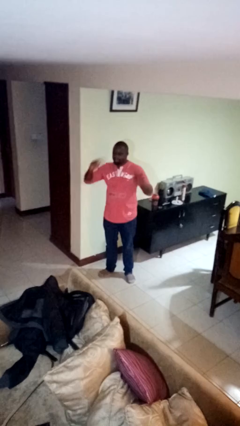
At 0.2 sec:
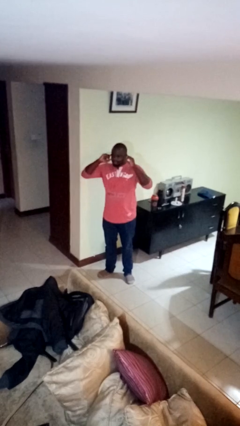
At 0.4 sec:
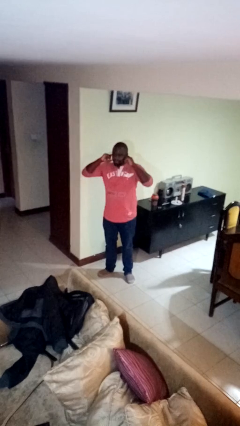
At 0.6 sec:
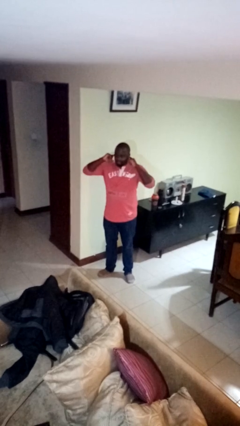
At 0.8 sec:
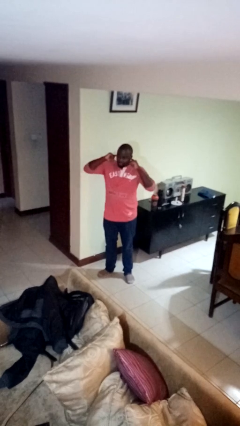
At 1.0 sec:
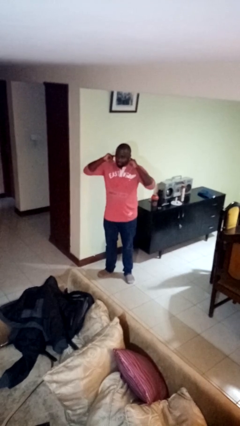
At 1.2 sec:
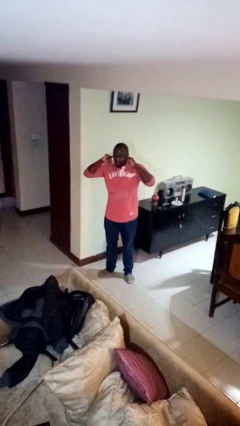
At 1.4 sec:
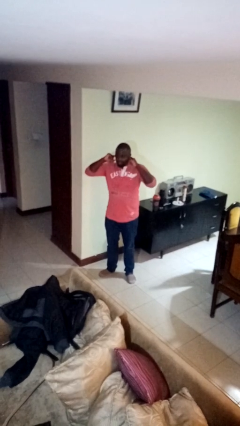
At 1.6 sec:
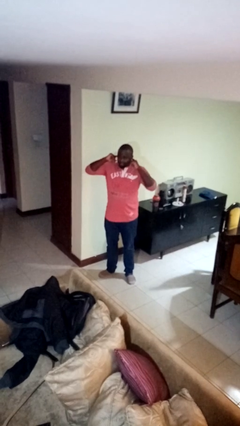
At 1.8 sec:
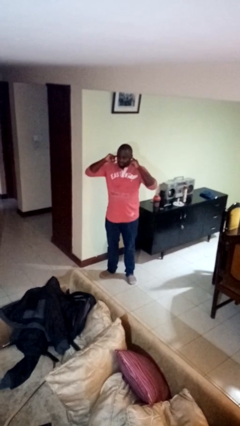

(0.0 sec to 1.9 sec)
person puts fingers in ear

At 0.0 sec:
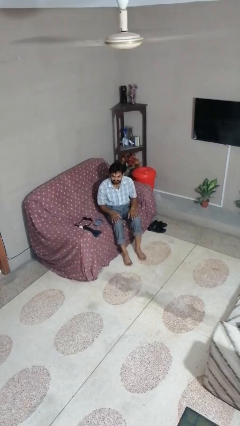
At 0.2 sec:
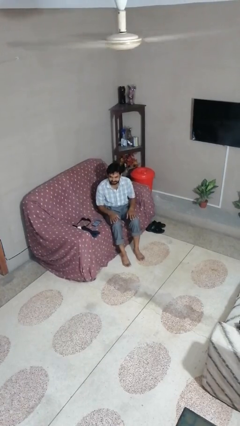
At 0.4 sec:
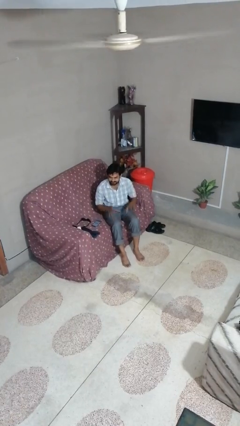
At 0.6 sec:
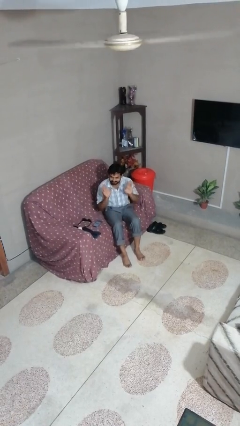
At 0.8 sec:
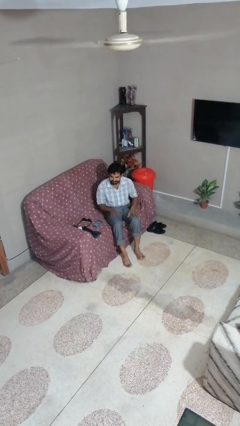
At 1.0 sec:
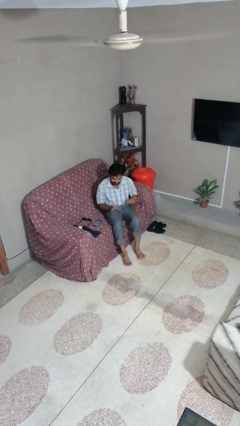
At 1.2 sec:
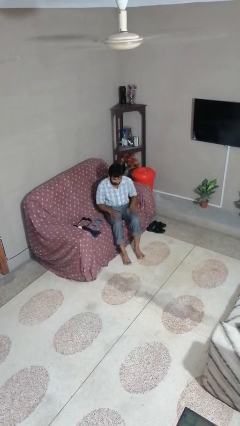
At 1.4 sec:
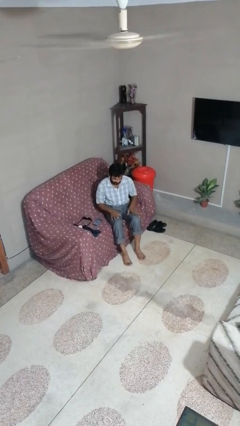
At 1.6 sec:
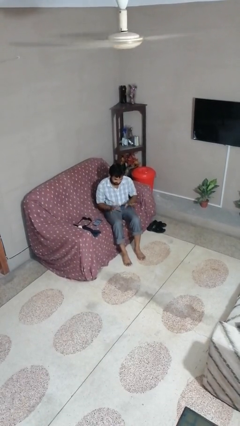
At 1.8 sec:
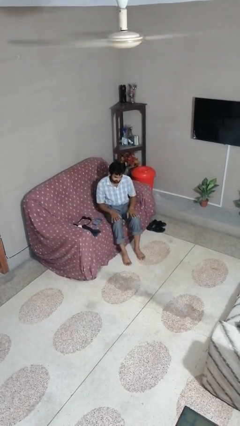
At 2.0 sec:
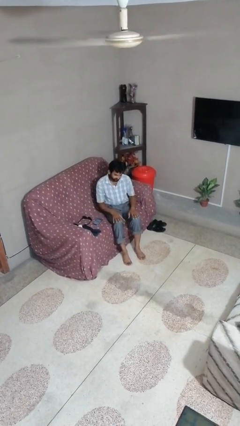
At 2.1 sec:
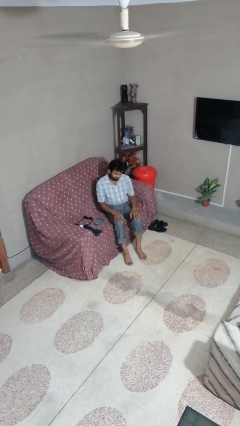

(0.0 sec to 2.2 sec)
person slaps hands on thighs

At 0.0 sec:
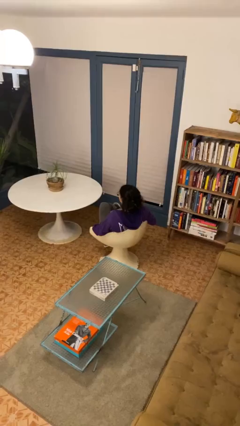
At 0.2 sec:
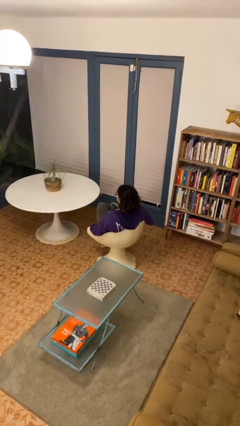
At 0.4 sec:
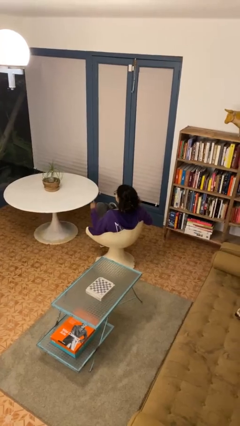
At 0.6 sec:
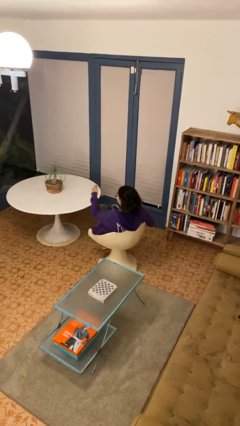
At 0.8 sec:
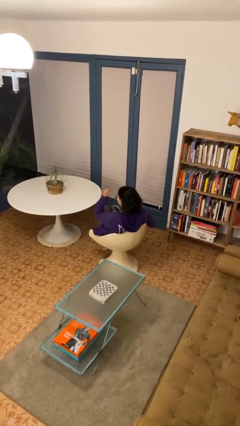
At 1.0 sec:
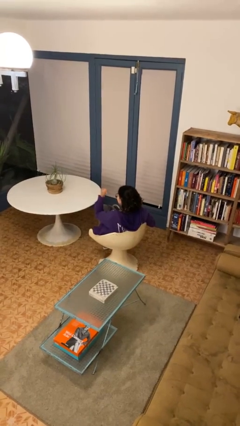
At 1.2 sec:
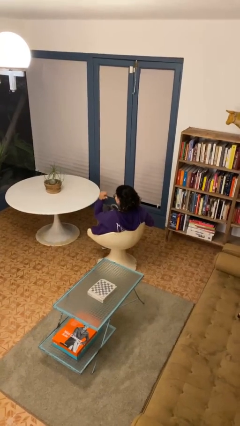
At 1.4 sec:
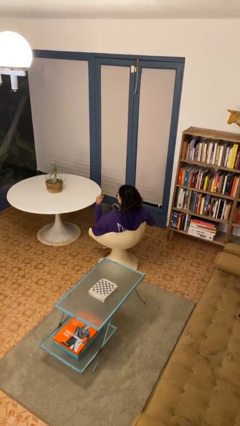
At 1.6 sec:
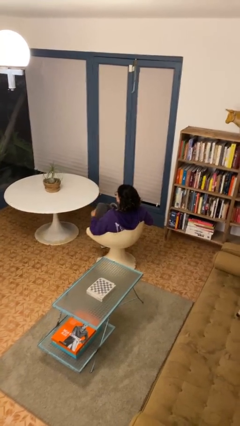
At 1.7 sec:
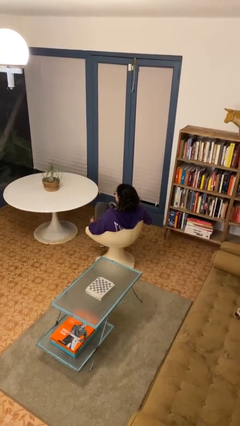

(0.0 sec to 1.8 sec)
person gestures behind me

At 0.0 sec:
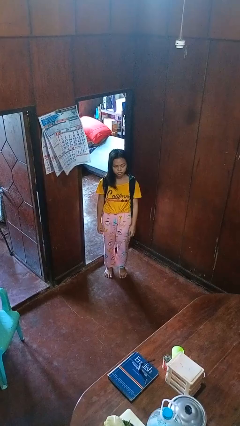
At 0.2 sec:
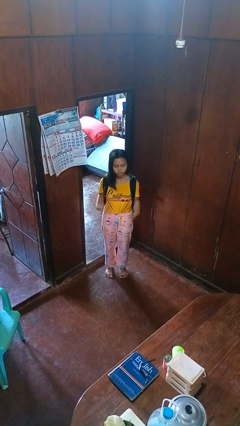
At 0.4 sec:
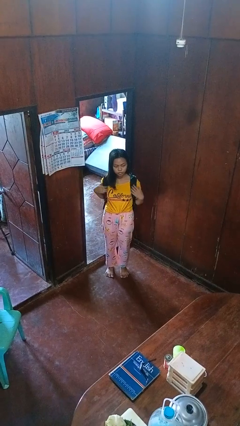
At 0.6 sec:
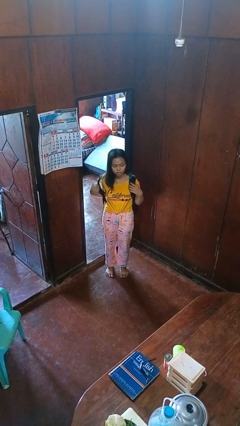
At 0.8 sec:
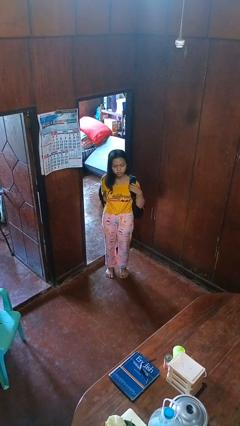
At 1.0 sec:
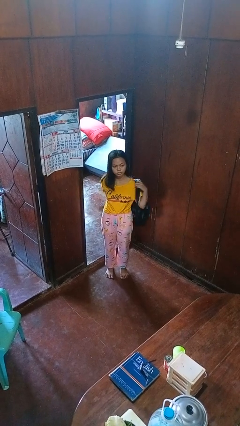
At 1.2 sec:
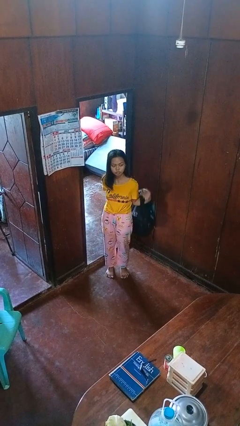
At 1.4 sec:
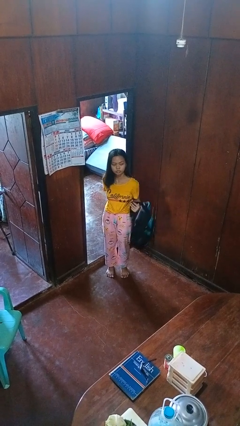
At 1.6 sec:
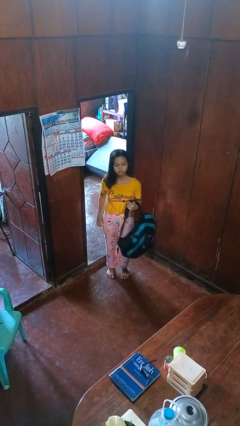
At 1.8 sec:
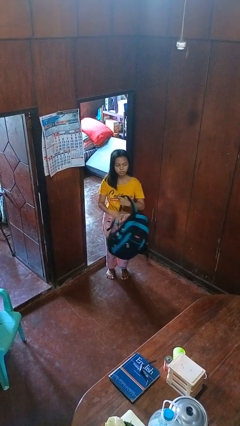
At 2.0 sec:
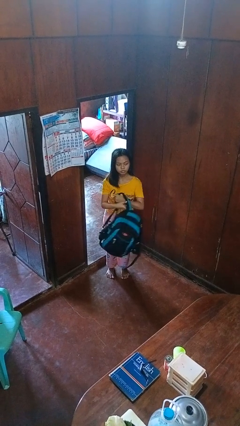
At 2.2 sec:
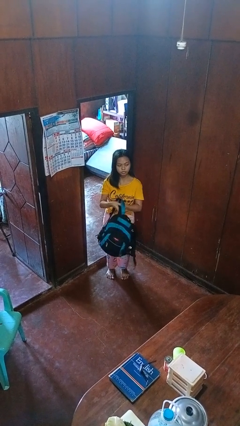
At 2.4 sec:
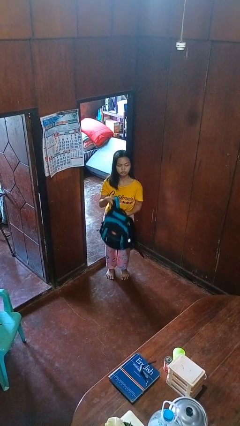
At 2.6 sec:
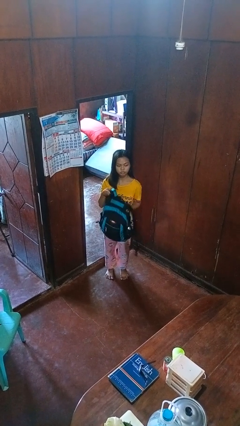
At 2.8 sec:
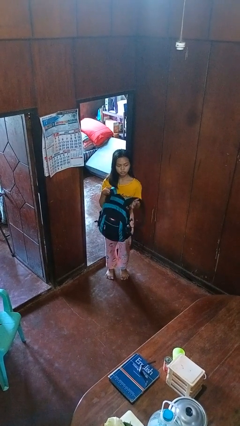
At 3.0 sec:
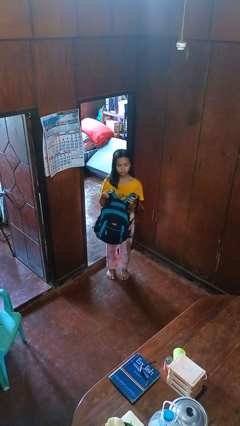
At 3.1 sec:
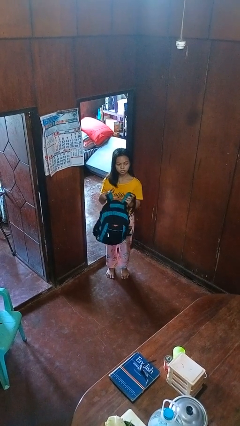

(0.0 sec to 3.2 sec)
person takes off backpack

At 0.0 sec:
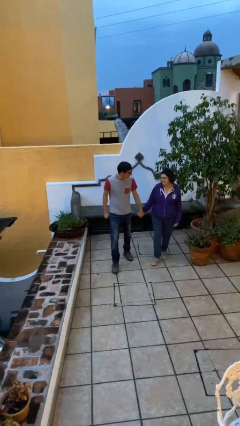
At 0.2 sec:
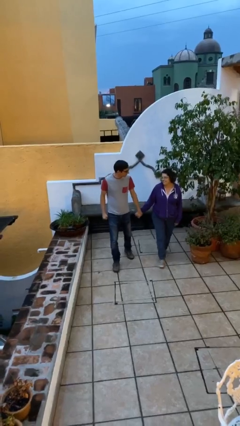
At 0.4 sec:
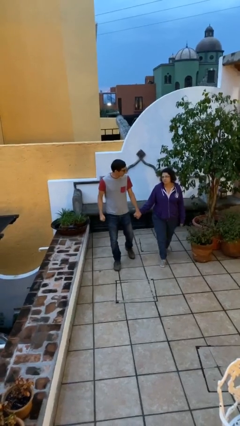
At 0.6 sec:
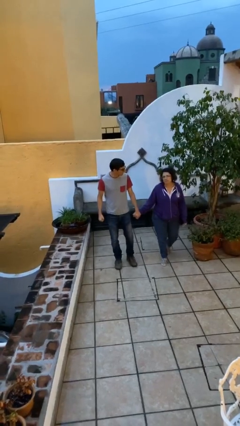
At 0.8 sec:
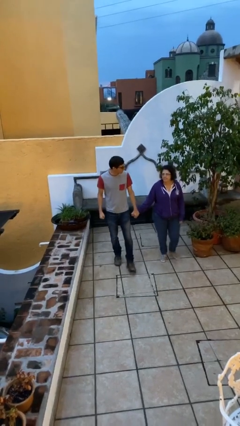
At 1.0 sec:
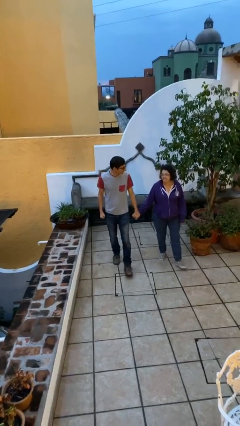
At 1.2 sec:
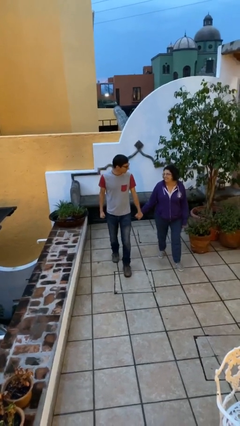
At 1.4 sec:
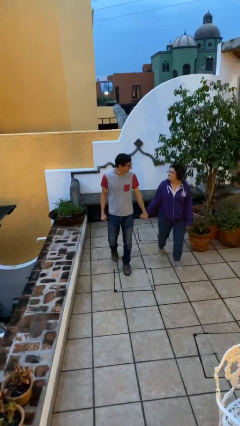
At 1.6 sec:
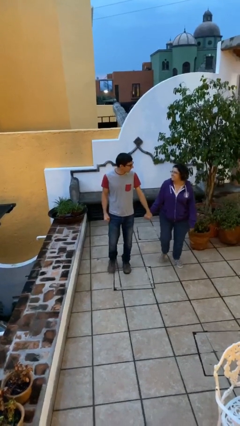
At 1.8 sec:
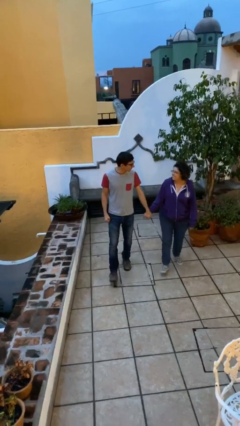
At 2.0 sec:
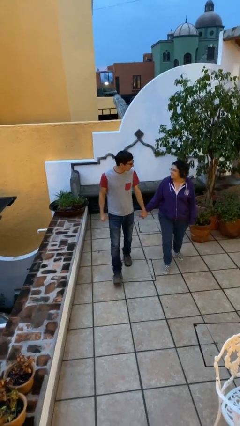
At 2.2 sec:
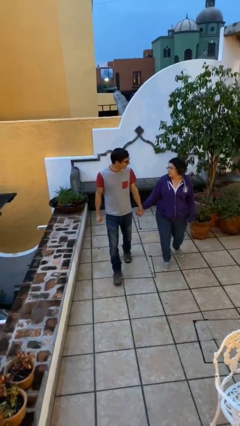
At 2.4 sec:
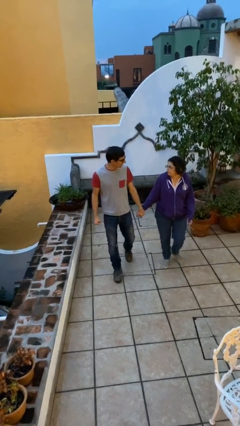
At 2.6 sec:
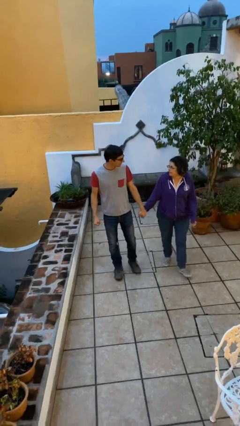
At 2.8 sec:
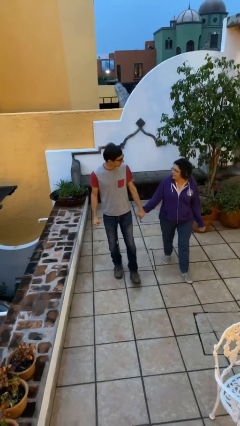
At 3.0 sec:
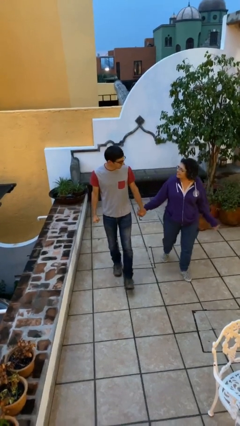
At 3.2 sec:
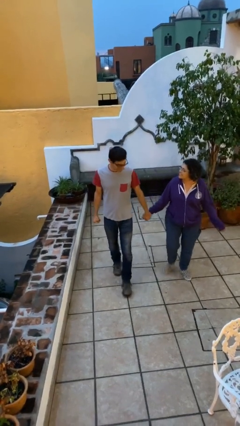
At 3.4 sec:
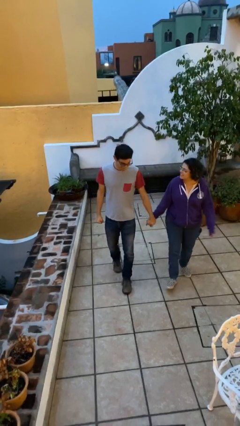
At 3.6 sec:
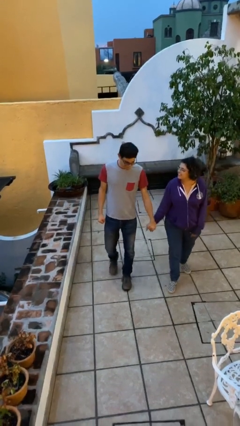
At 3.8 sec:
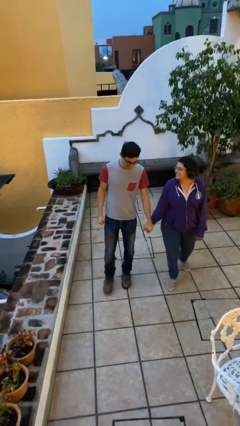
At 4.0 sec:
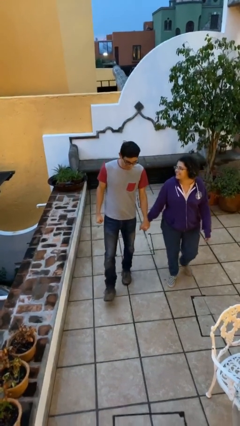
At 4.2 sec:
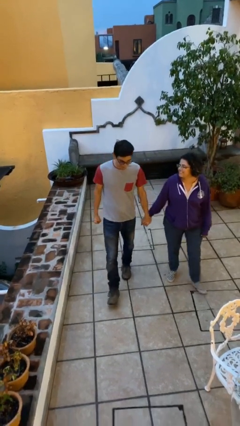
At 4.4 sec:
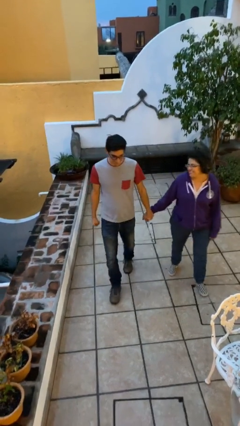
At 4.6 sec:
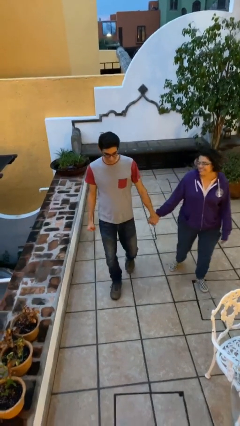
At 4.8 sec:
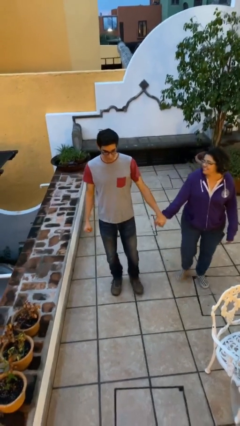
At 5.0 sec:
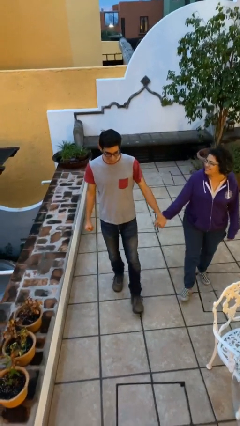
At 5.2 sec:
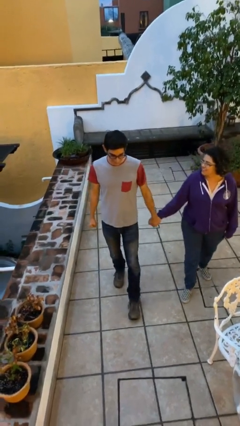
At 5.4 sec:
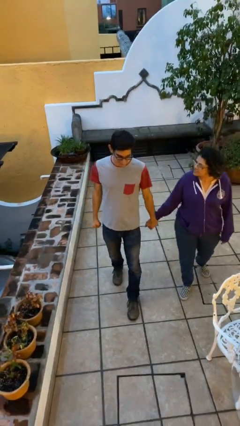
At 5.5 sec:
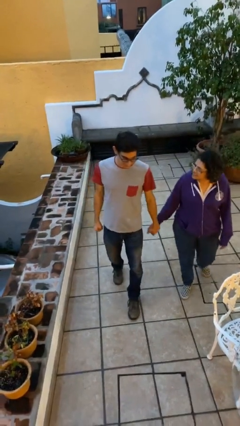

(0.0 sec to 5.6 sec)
person holds hand

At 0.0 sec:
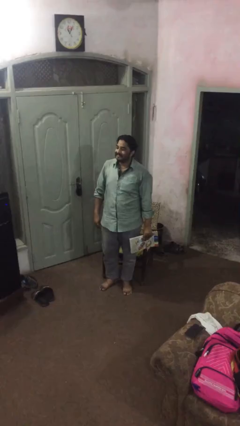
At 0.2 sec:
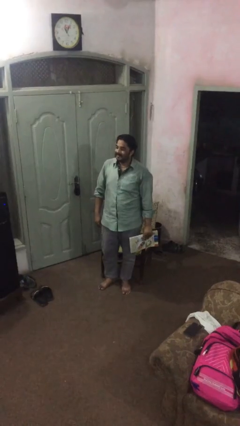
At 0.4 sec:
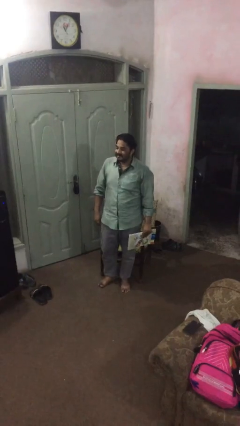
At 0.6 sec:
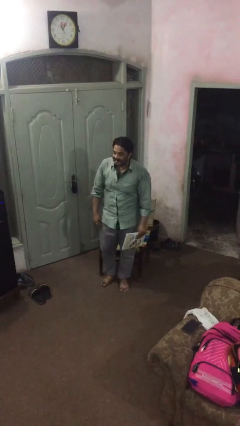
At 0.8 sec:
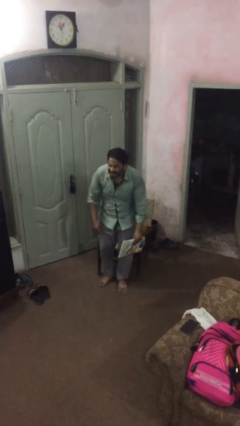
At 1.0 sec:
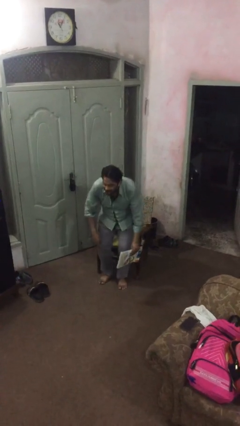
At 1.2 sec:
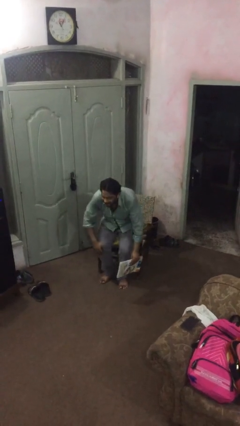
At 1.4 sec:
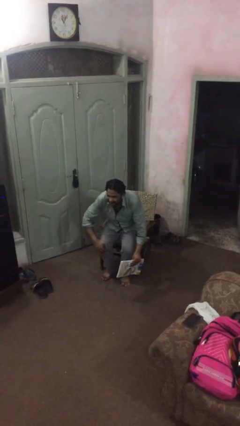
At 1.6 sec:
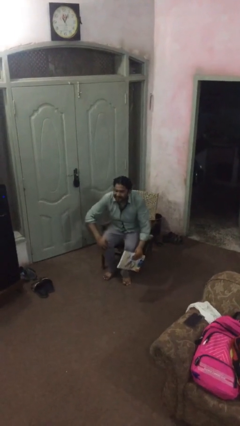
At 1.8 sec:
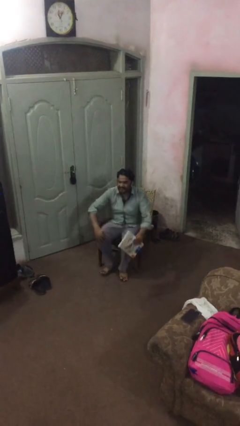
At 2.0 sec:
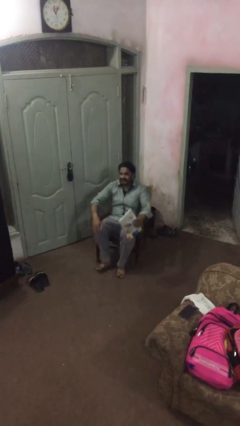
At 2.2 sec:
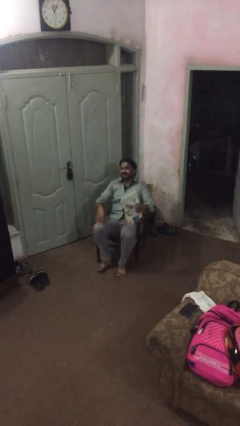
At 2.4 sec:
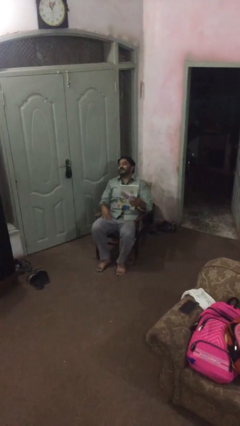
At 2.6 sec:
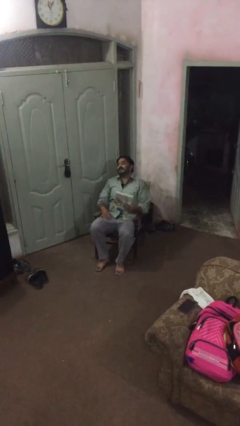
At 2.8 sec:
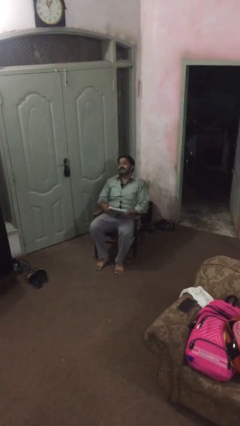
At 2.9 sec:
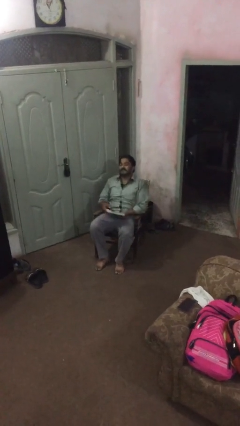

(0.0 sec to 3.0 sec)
person sits down
